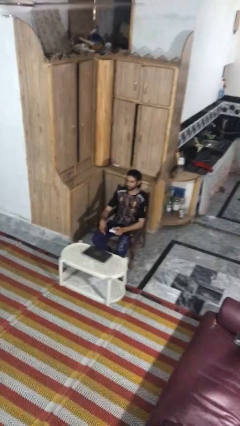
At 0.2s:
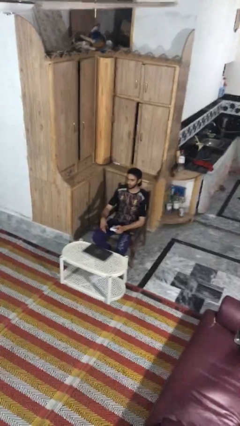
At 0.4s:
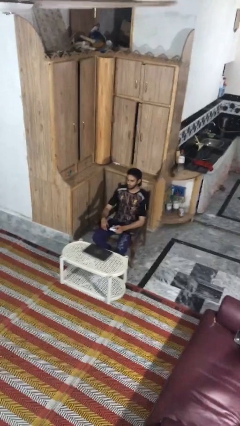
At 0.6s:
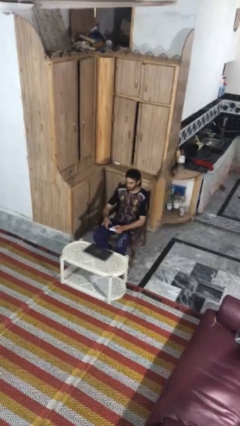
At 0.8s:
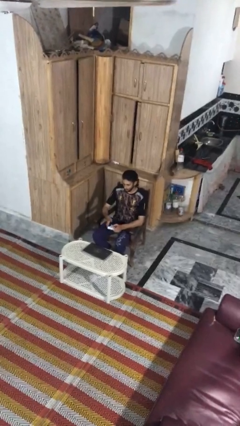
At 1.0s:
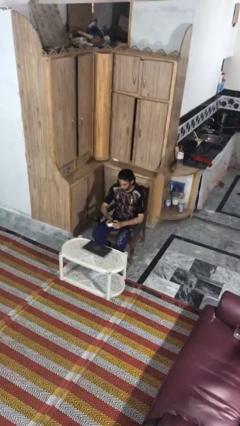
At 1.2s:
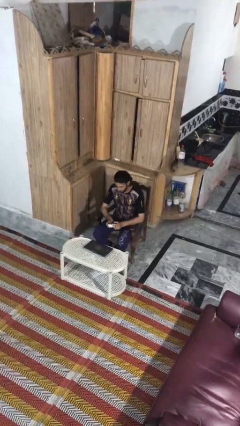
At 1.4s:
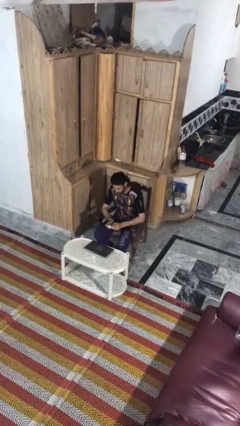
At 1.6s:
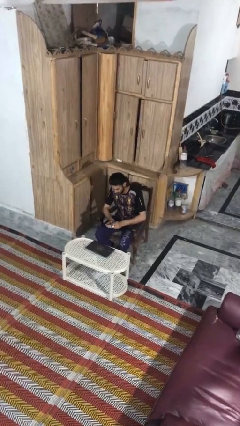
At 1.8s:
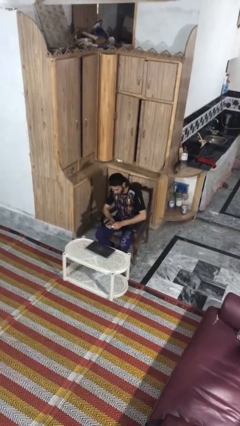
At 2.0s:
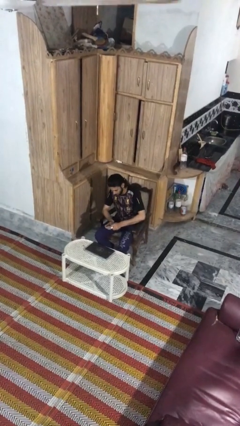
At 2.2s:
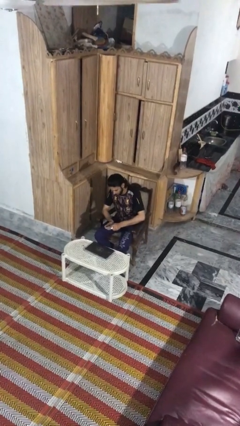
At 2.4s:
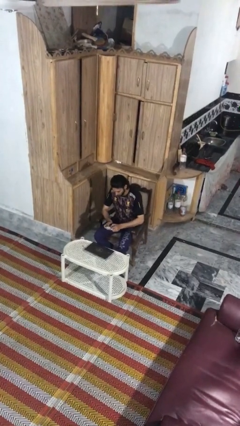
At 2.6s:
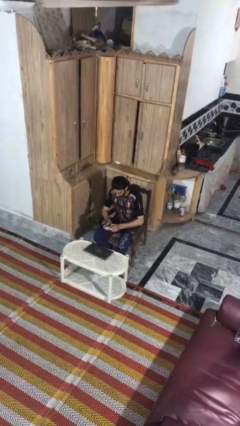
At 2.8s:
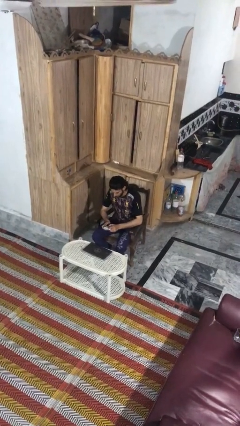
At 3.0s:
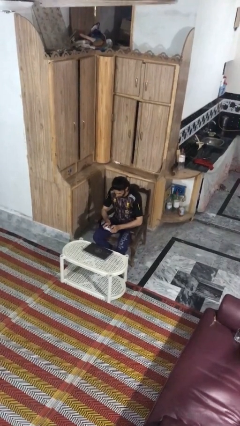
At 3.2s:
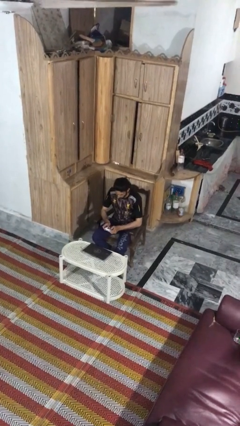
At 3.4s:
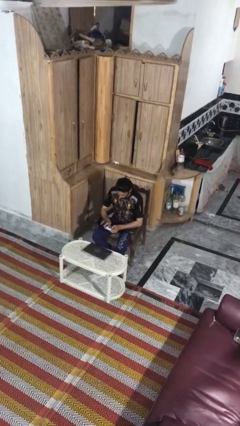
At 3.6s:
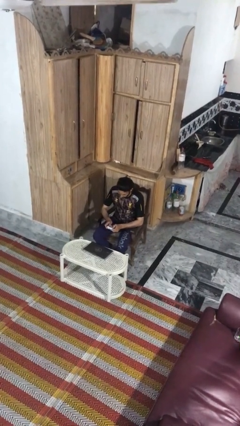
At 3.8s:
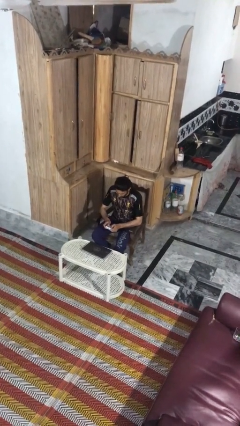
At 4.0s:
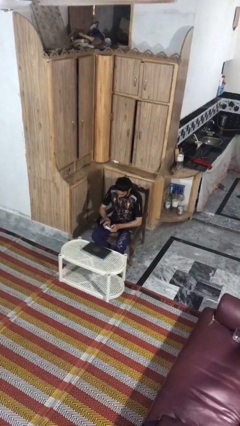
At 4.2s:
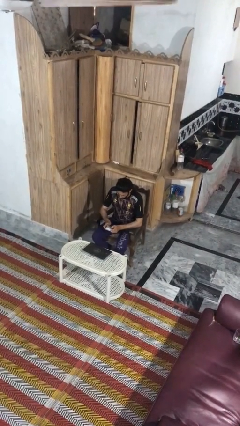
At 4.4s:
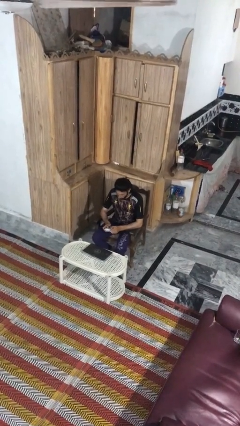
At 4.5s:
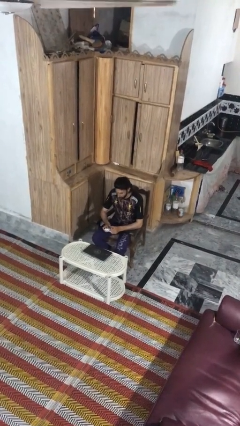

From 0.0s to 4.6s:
person interacts with handheld game

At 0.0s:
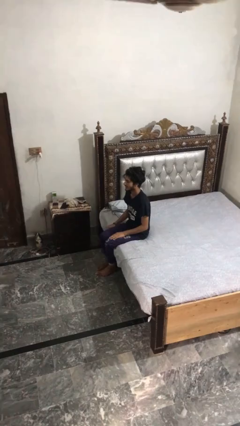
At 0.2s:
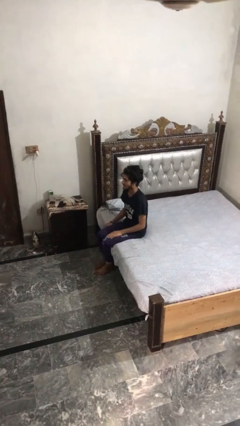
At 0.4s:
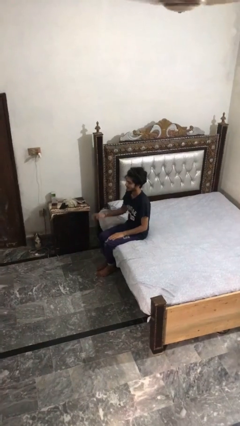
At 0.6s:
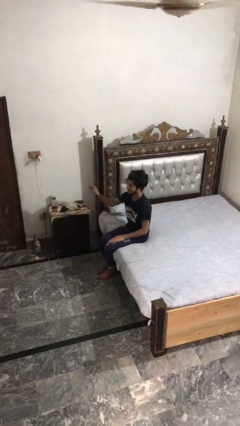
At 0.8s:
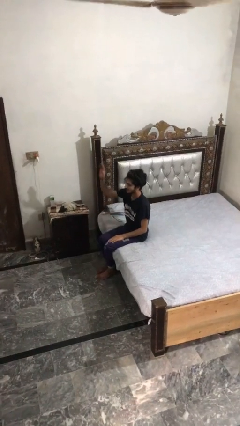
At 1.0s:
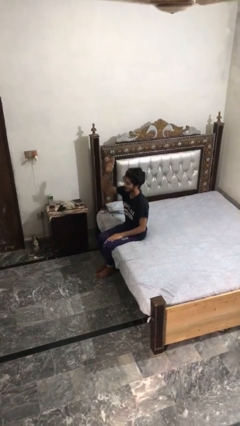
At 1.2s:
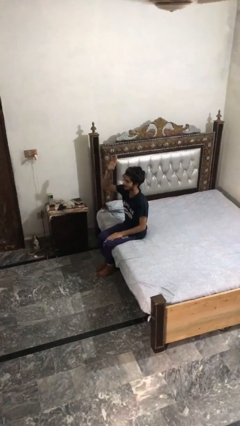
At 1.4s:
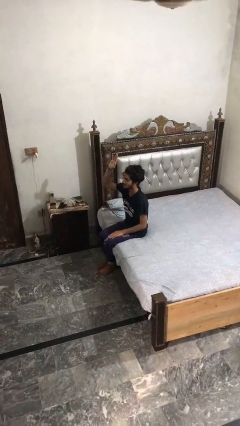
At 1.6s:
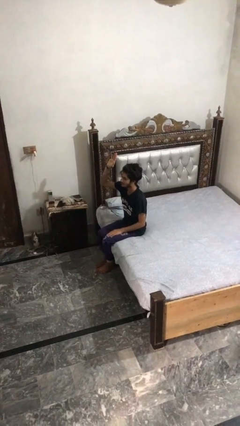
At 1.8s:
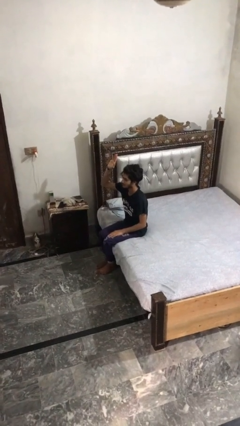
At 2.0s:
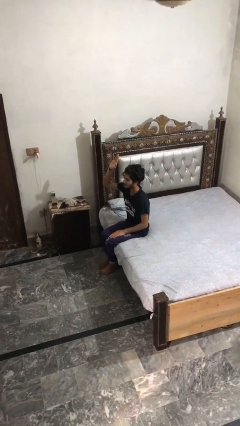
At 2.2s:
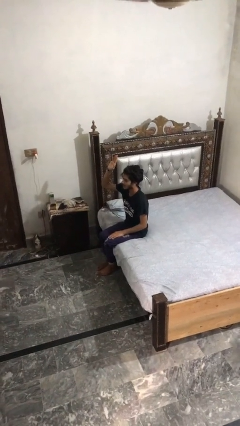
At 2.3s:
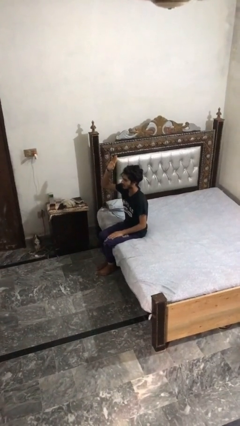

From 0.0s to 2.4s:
person gestures raise hand

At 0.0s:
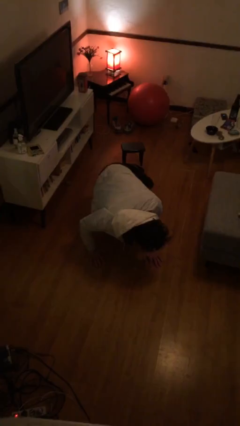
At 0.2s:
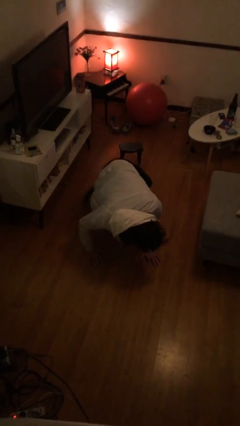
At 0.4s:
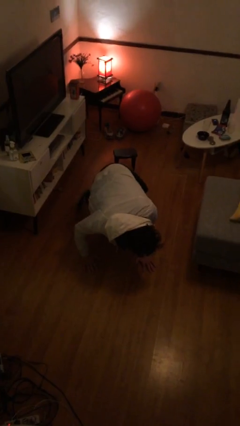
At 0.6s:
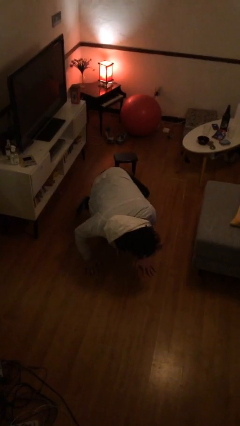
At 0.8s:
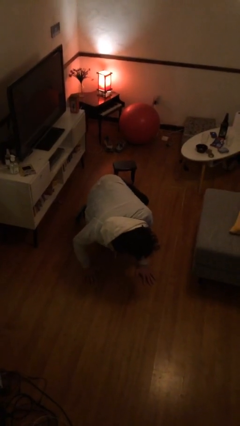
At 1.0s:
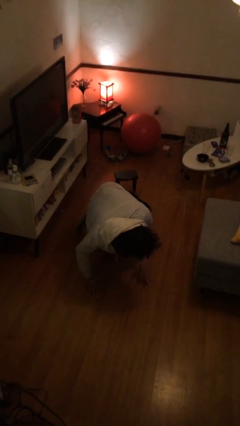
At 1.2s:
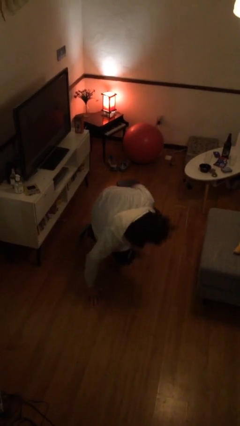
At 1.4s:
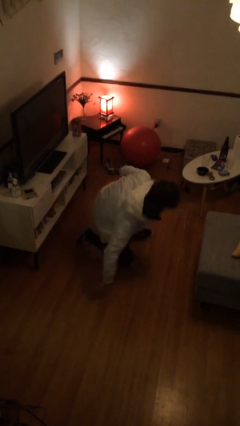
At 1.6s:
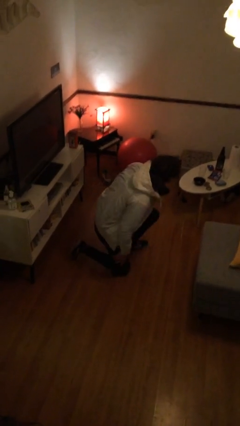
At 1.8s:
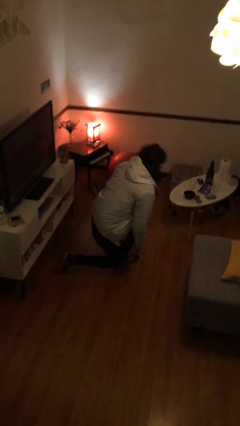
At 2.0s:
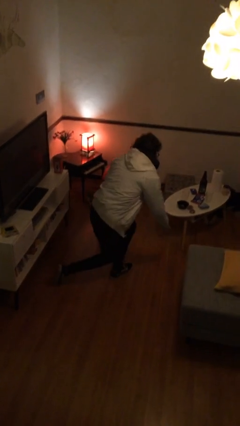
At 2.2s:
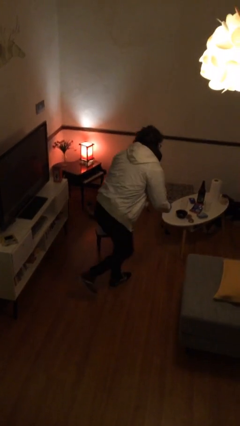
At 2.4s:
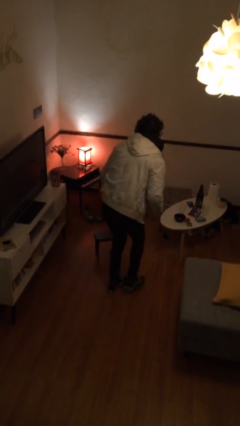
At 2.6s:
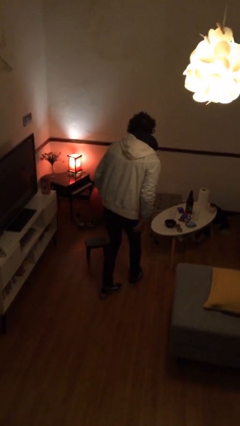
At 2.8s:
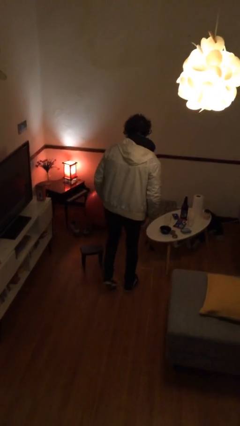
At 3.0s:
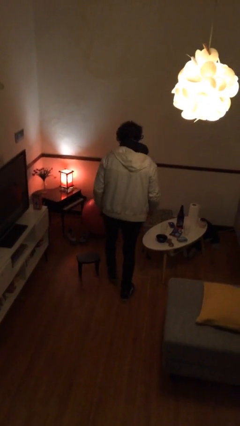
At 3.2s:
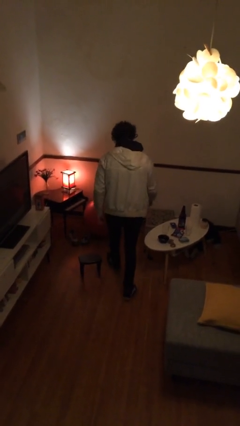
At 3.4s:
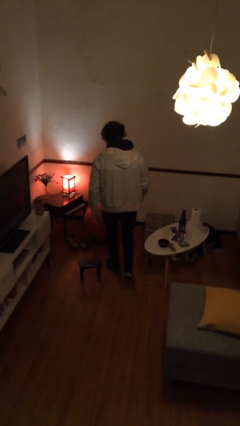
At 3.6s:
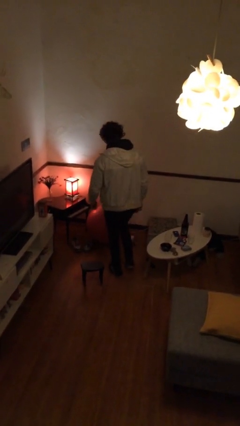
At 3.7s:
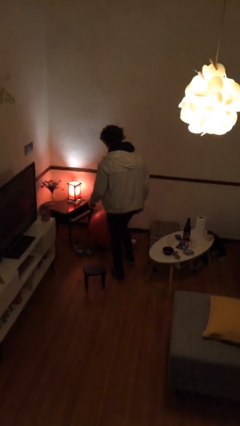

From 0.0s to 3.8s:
person stands up from floor

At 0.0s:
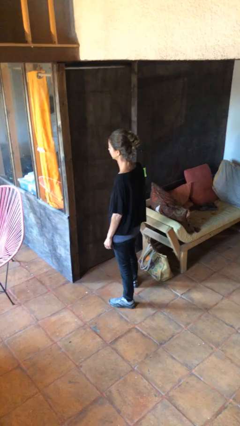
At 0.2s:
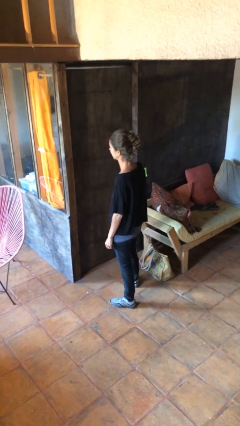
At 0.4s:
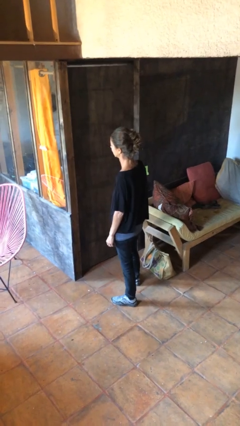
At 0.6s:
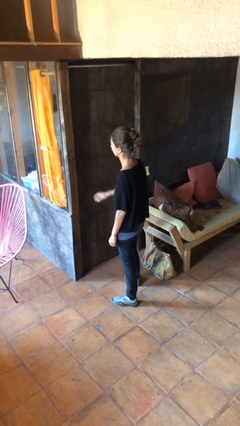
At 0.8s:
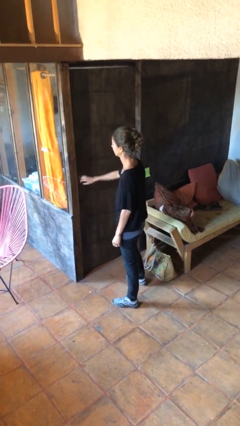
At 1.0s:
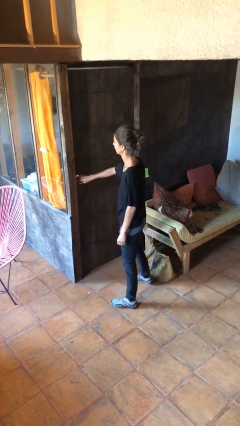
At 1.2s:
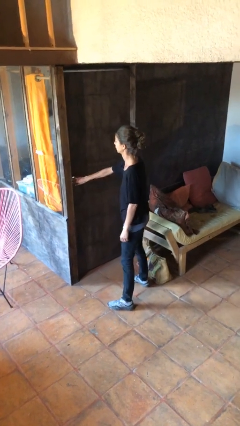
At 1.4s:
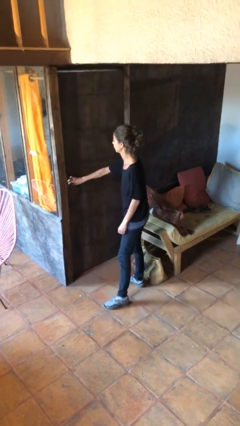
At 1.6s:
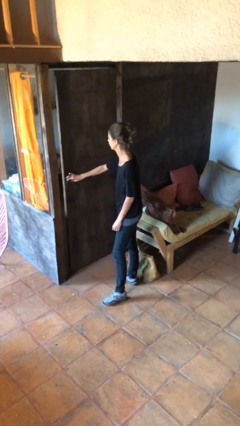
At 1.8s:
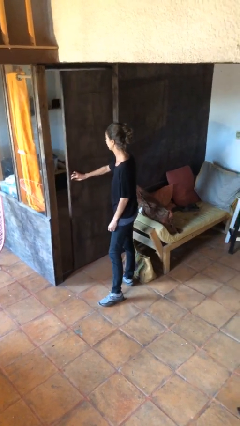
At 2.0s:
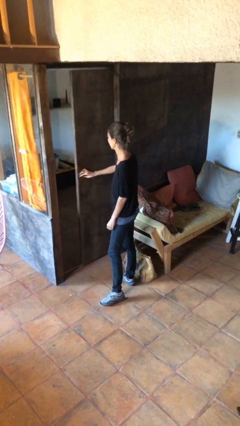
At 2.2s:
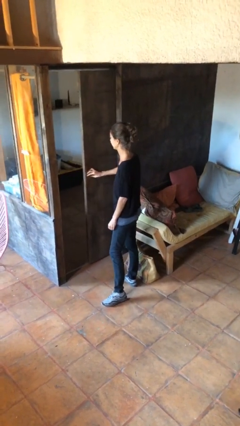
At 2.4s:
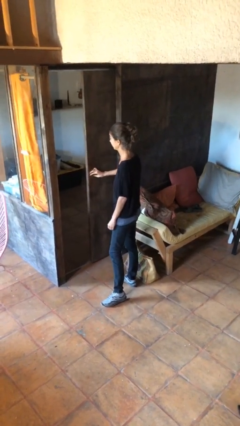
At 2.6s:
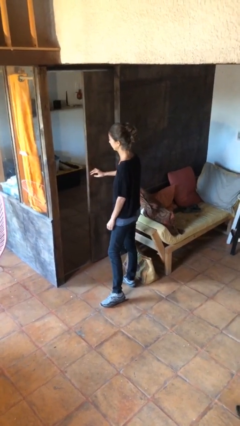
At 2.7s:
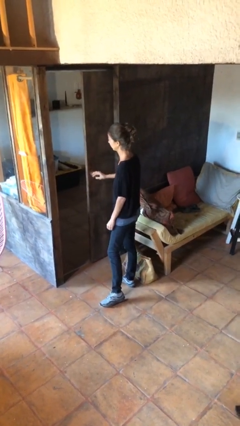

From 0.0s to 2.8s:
person opens sliding door

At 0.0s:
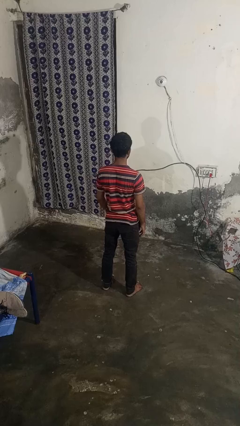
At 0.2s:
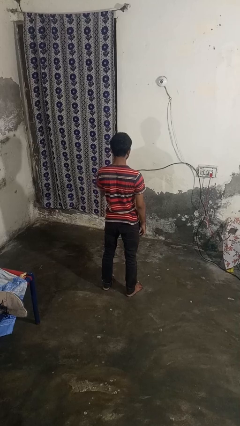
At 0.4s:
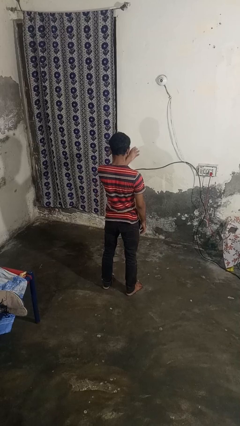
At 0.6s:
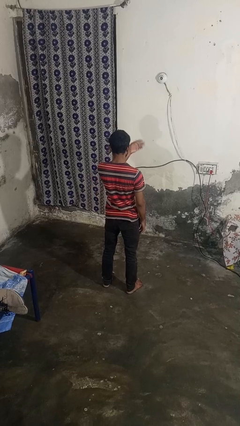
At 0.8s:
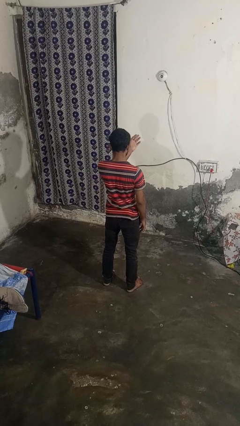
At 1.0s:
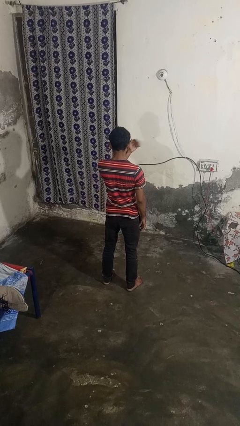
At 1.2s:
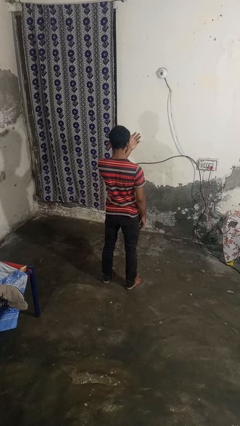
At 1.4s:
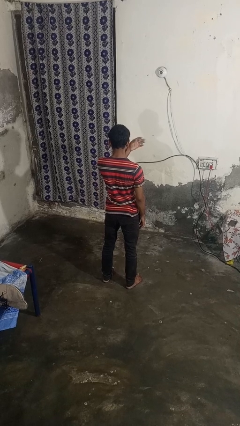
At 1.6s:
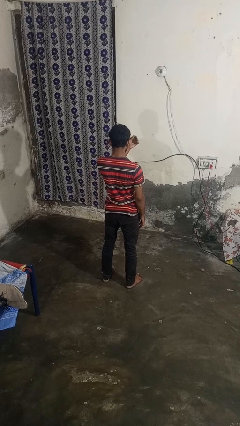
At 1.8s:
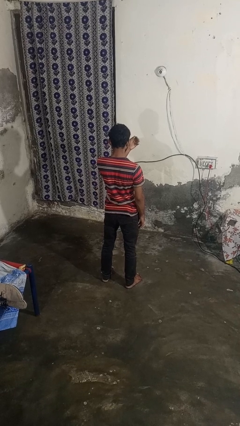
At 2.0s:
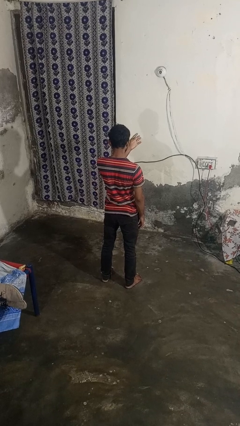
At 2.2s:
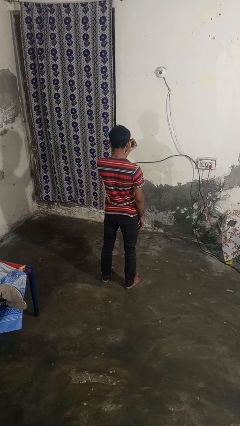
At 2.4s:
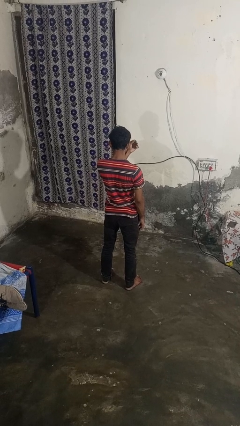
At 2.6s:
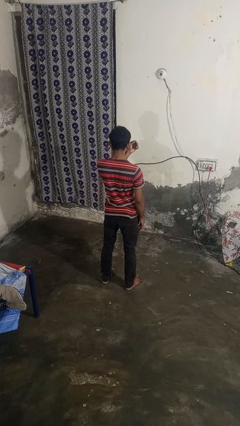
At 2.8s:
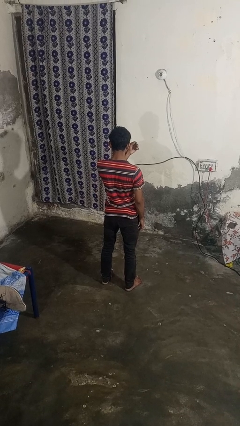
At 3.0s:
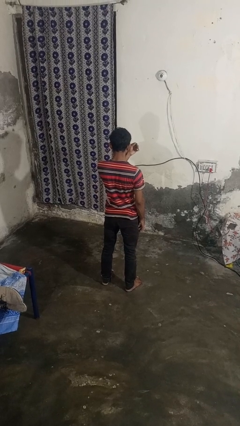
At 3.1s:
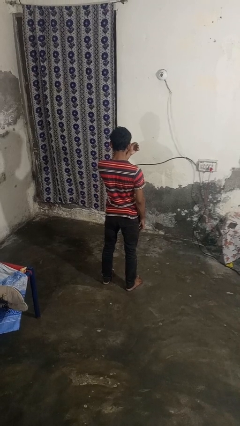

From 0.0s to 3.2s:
person gestures come here

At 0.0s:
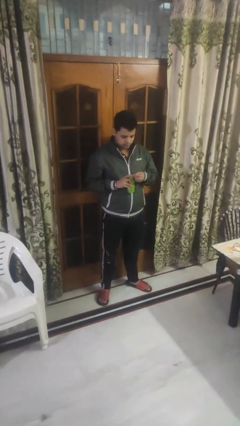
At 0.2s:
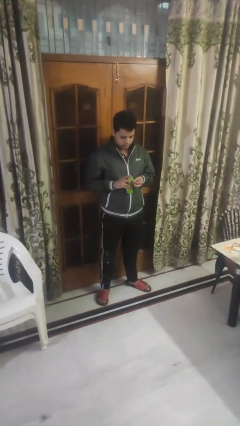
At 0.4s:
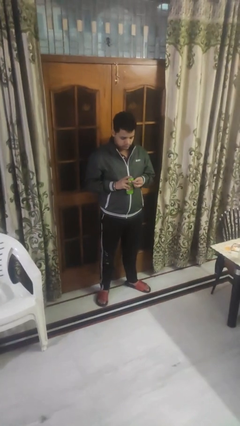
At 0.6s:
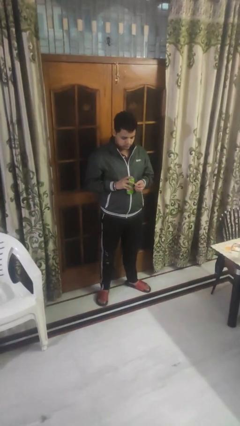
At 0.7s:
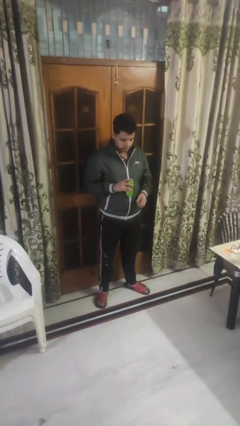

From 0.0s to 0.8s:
person opens beverage can
